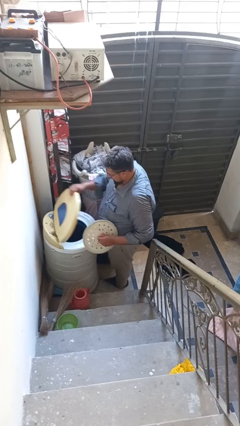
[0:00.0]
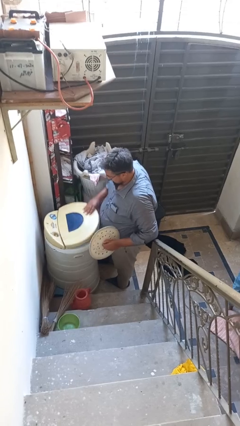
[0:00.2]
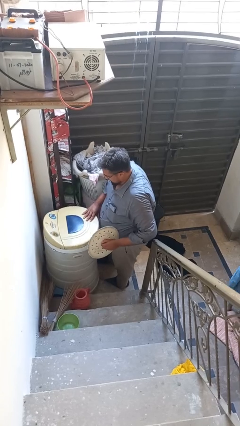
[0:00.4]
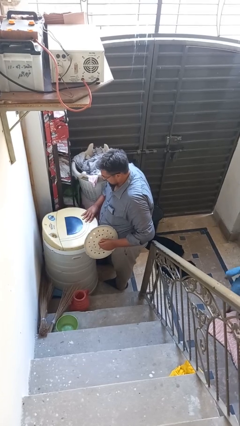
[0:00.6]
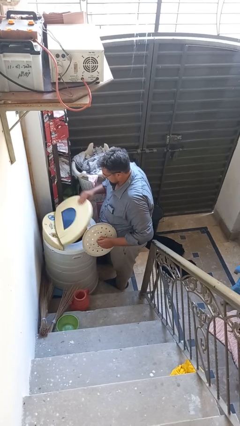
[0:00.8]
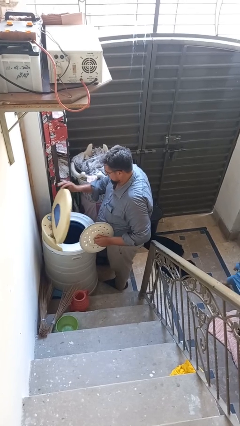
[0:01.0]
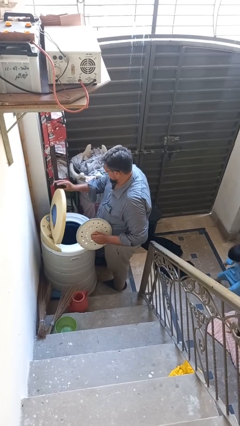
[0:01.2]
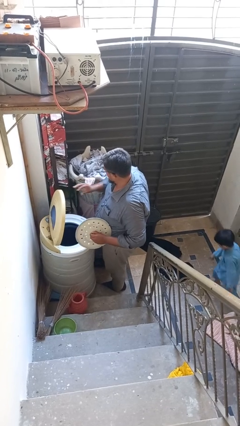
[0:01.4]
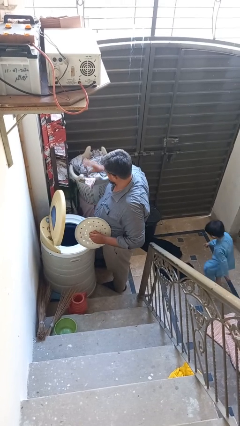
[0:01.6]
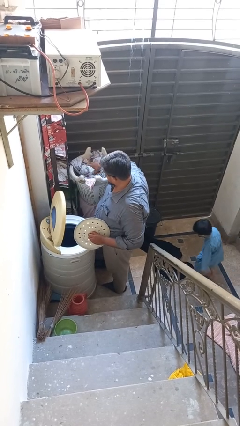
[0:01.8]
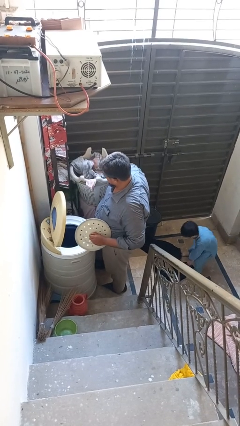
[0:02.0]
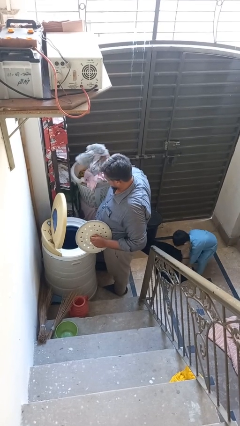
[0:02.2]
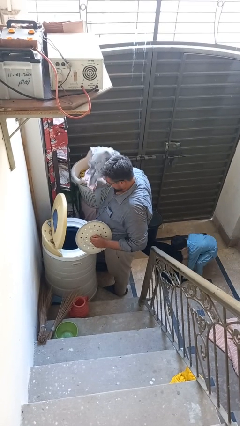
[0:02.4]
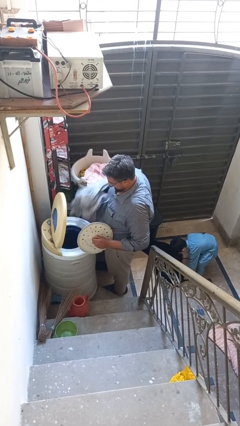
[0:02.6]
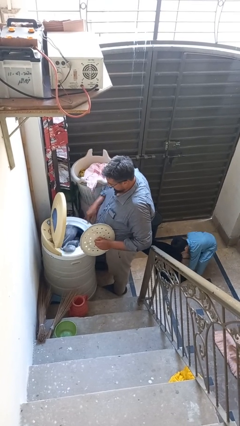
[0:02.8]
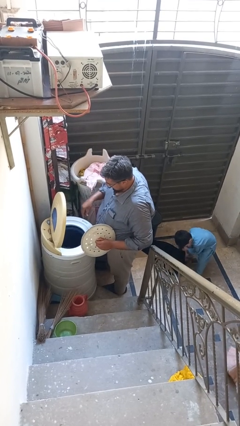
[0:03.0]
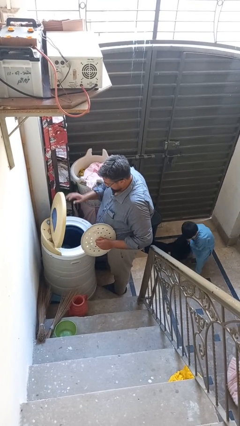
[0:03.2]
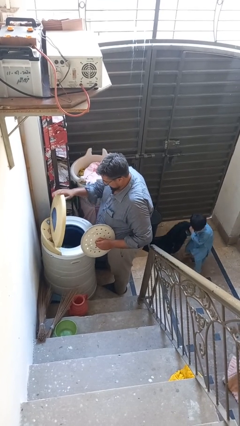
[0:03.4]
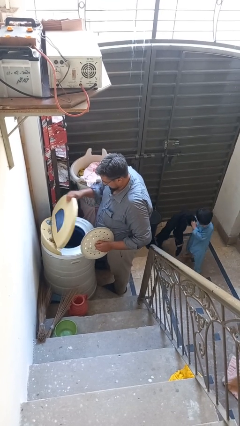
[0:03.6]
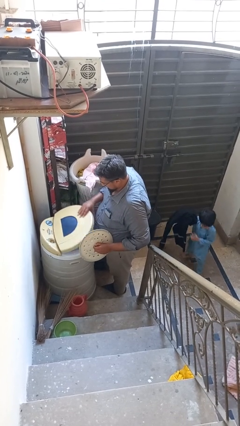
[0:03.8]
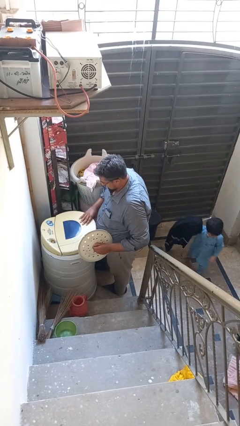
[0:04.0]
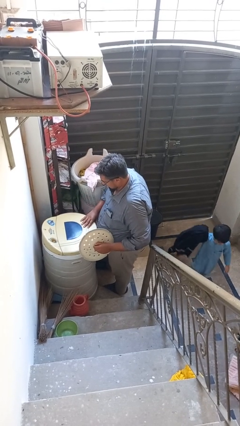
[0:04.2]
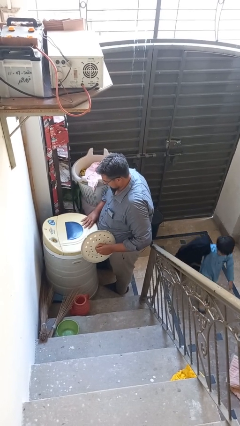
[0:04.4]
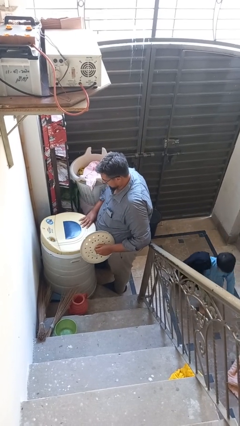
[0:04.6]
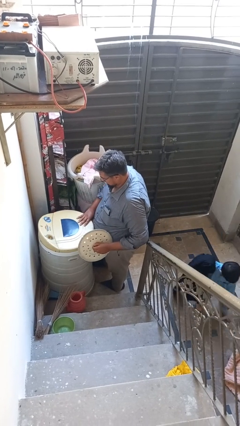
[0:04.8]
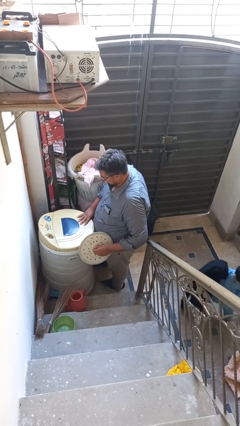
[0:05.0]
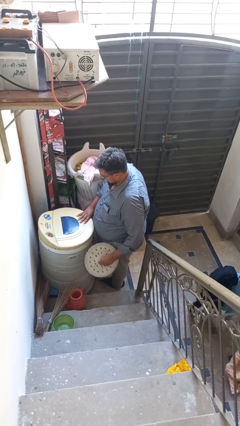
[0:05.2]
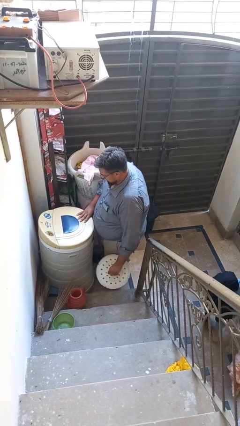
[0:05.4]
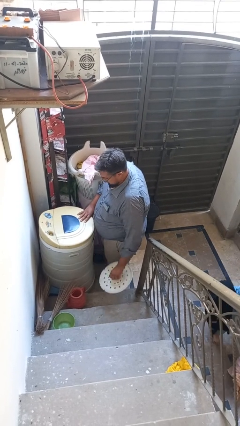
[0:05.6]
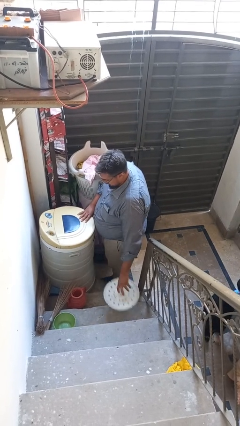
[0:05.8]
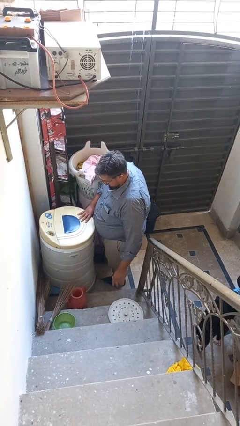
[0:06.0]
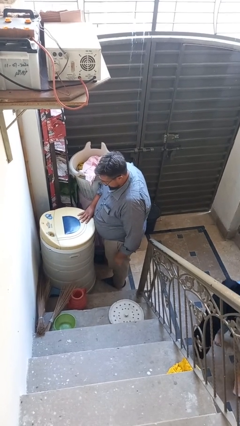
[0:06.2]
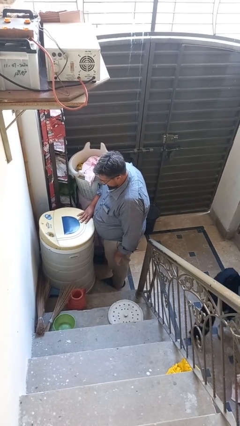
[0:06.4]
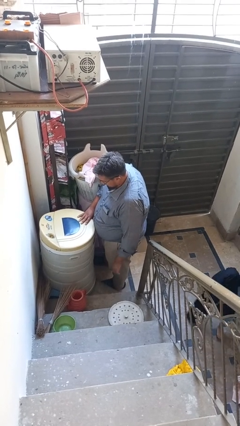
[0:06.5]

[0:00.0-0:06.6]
person loads clotheswasher

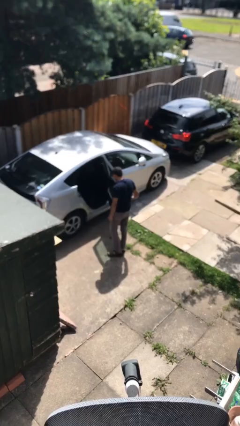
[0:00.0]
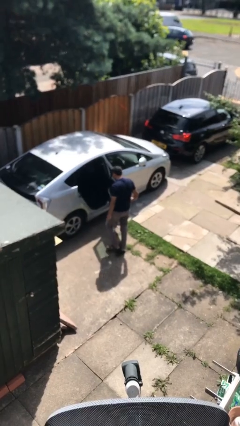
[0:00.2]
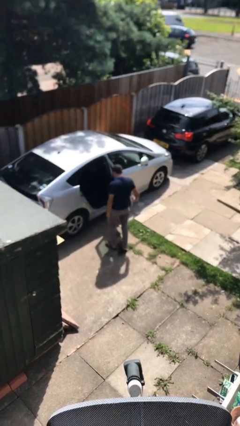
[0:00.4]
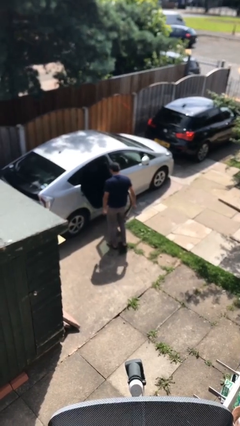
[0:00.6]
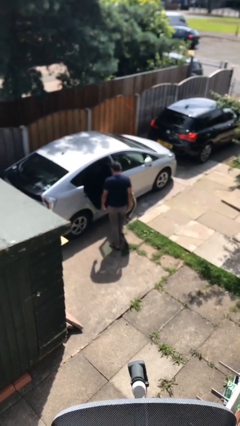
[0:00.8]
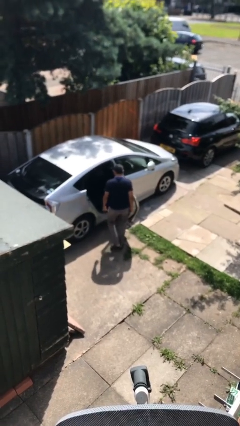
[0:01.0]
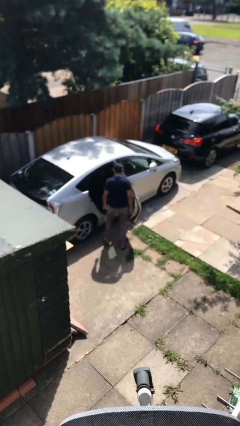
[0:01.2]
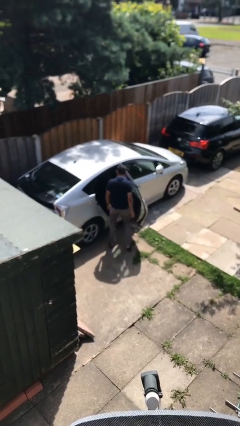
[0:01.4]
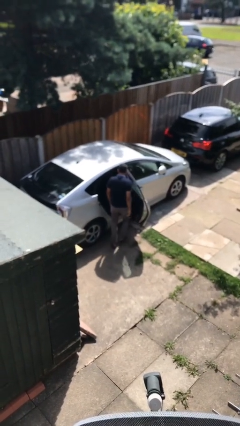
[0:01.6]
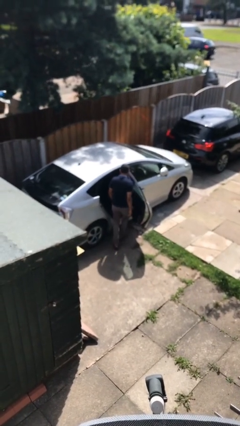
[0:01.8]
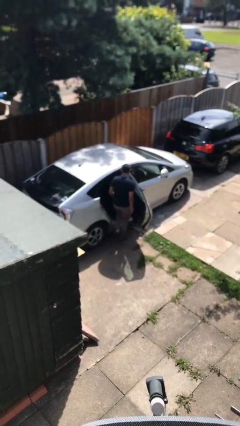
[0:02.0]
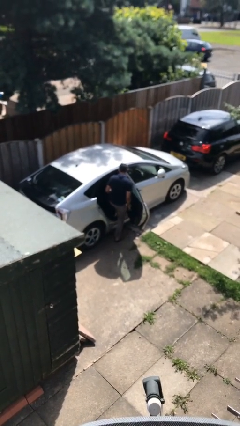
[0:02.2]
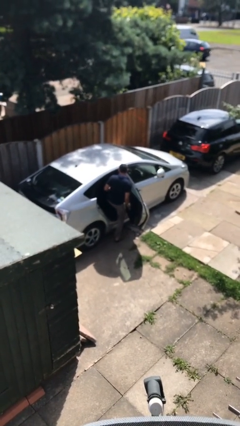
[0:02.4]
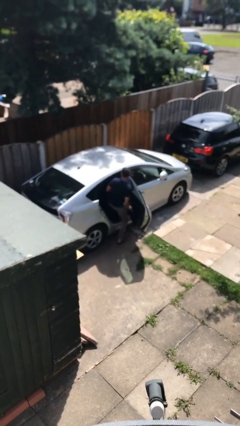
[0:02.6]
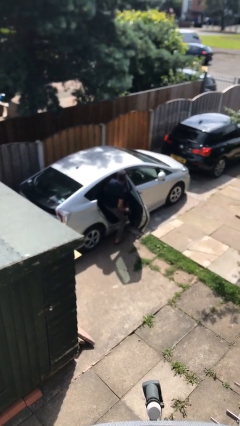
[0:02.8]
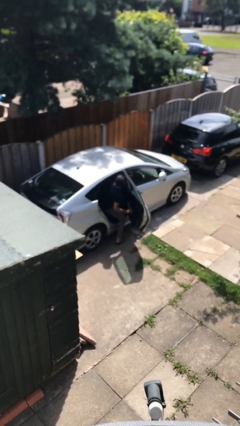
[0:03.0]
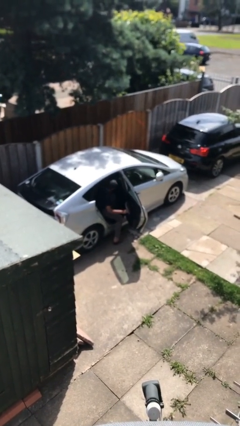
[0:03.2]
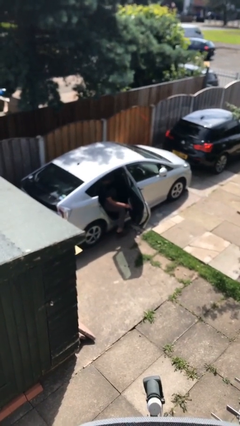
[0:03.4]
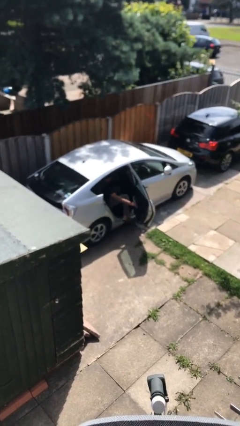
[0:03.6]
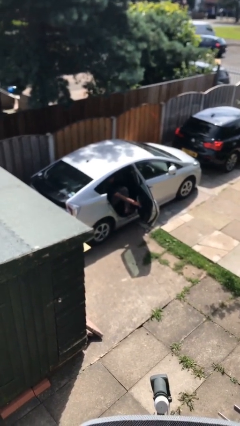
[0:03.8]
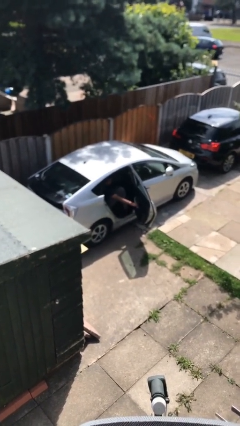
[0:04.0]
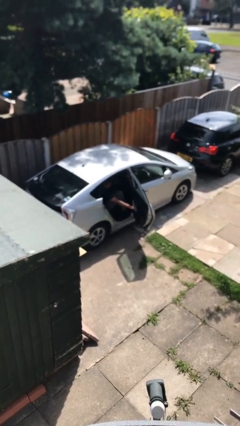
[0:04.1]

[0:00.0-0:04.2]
person enters car

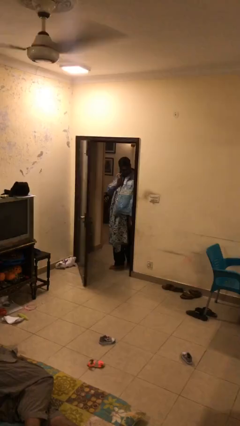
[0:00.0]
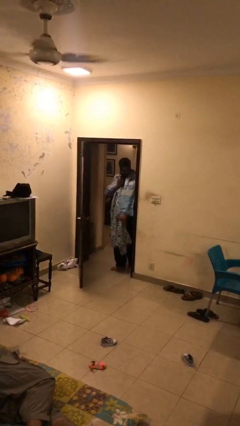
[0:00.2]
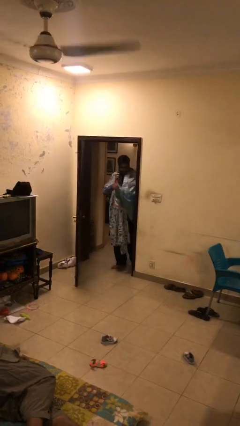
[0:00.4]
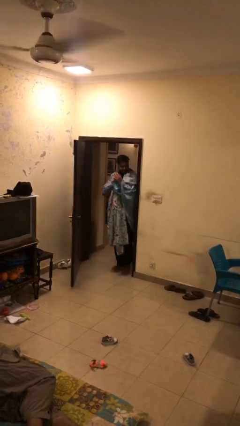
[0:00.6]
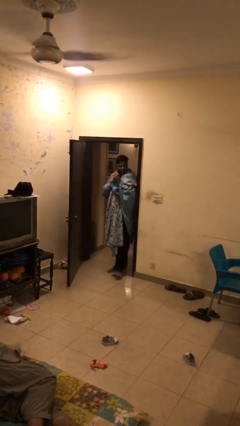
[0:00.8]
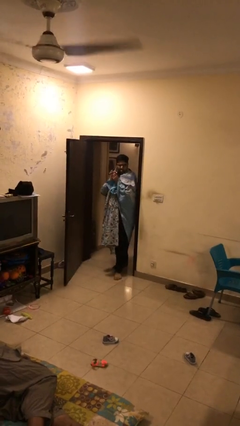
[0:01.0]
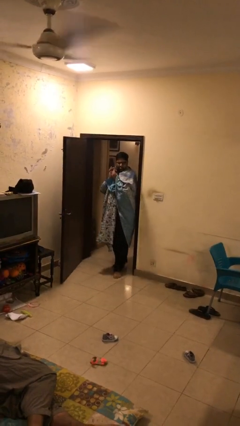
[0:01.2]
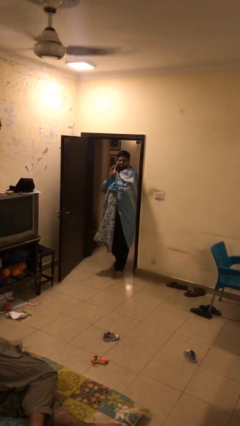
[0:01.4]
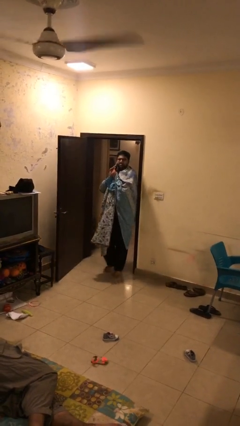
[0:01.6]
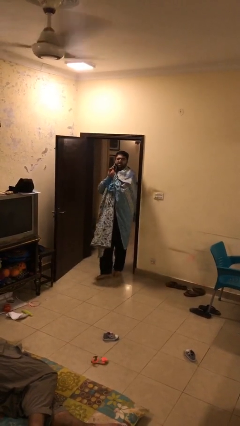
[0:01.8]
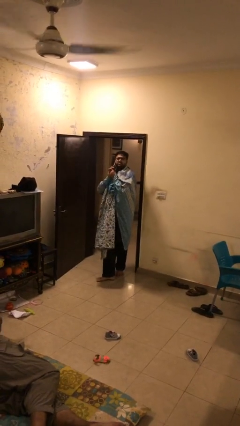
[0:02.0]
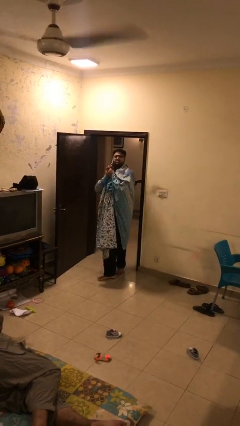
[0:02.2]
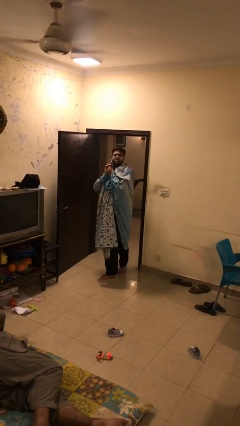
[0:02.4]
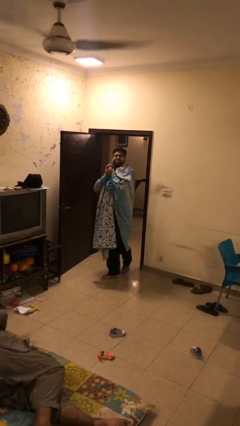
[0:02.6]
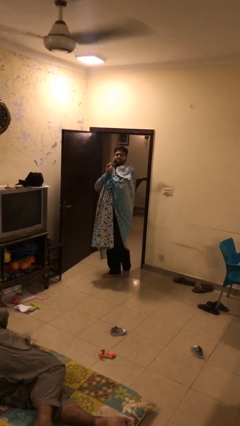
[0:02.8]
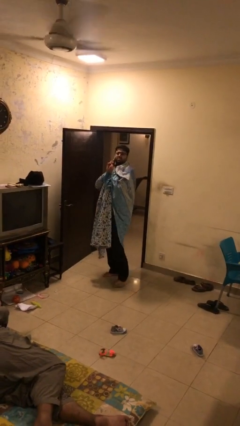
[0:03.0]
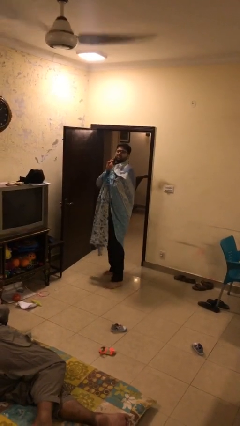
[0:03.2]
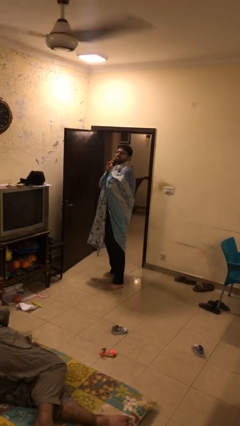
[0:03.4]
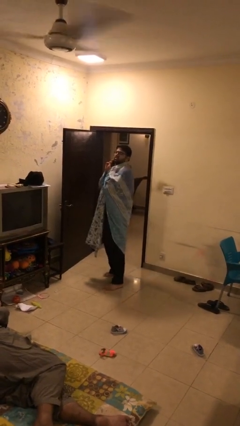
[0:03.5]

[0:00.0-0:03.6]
person enters scene through structure

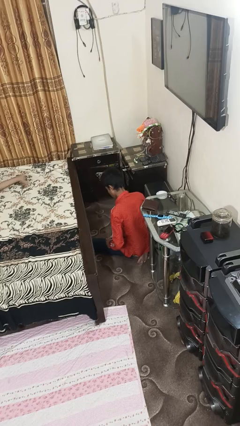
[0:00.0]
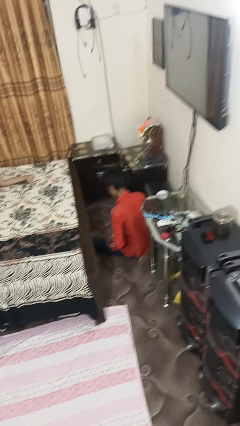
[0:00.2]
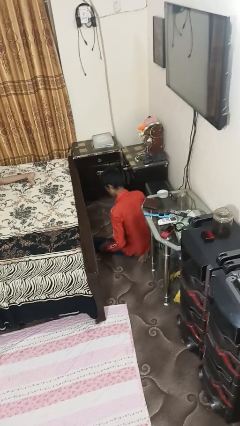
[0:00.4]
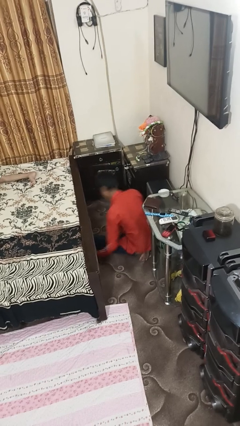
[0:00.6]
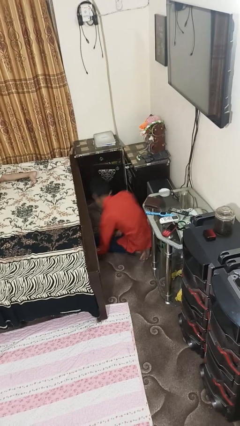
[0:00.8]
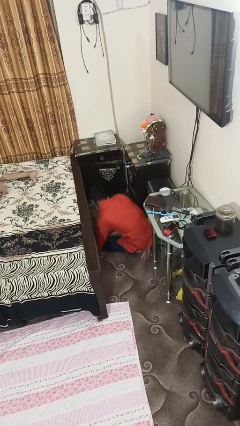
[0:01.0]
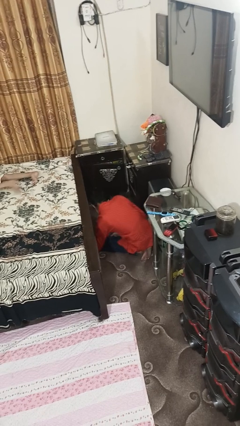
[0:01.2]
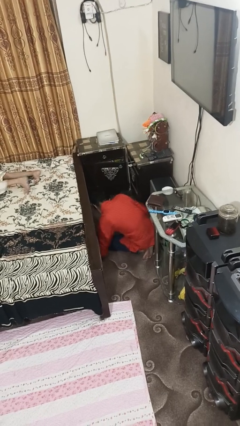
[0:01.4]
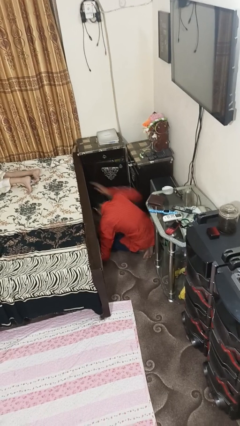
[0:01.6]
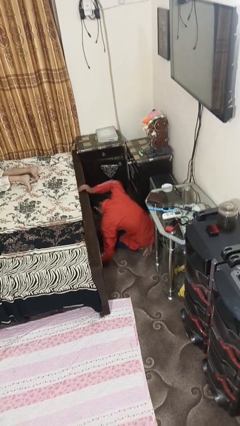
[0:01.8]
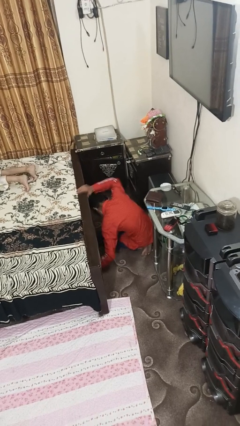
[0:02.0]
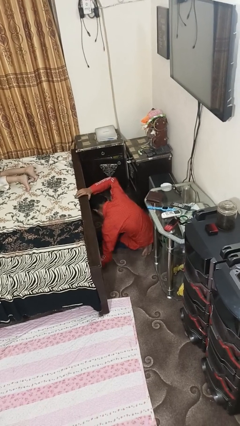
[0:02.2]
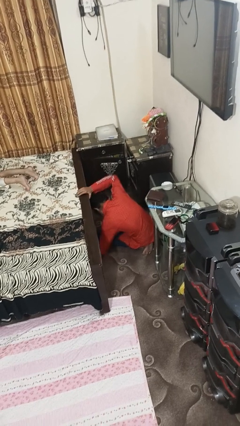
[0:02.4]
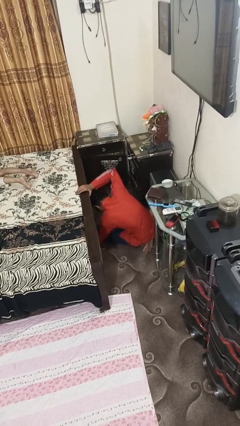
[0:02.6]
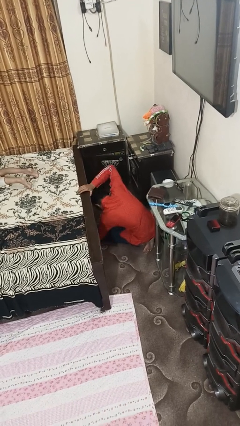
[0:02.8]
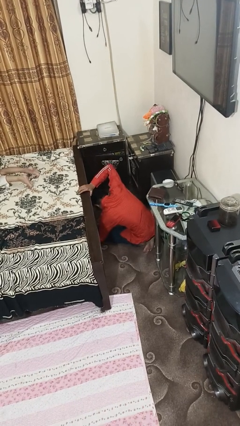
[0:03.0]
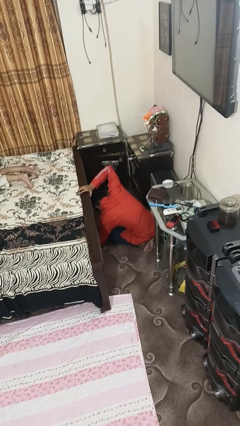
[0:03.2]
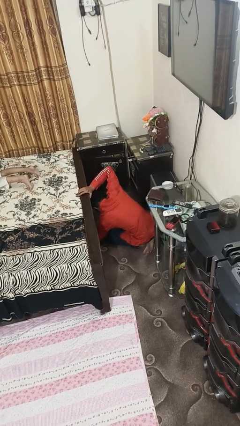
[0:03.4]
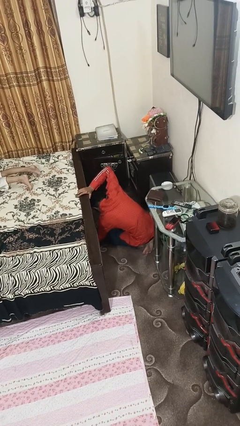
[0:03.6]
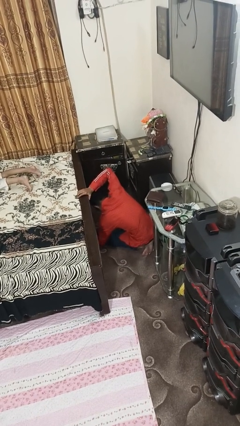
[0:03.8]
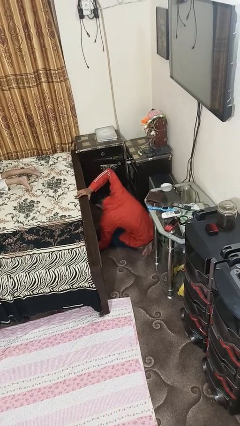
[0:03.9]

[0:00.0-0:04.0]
person searches under bed
